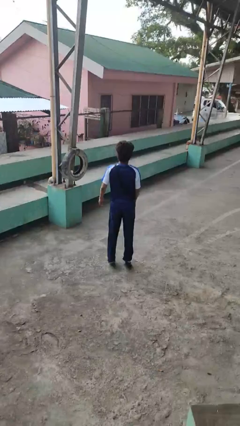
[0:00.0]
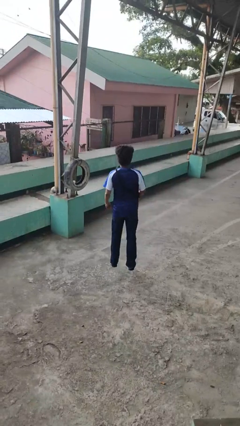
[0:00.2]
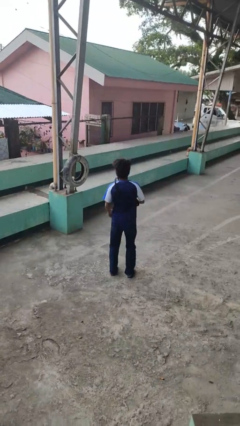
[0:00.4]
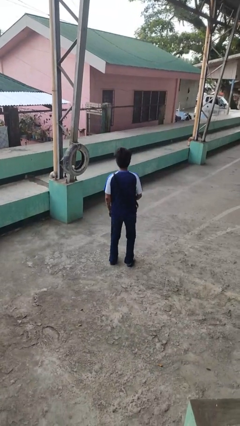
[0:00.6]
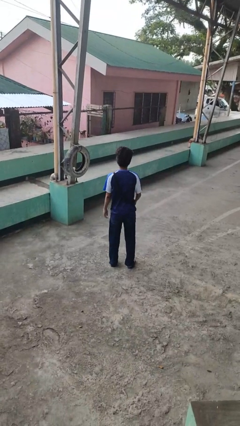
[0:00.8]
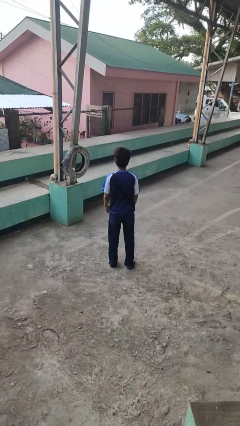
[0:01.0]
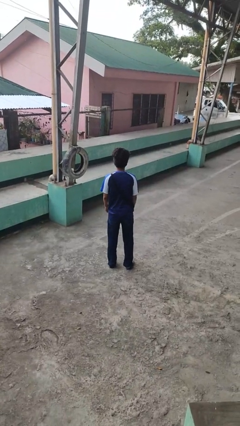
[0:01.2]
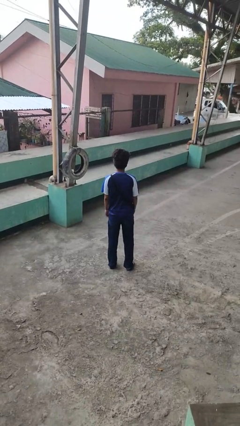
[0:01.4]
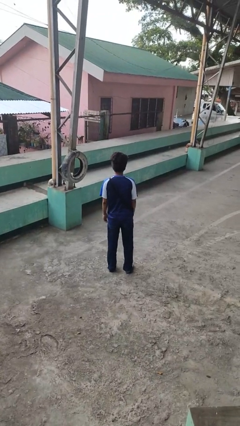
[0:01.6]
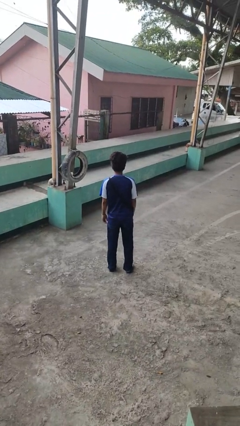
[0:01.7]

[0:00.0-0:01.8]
person jumps

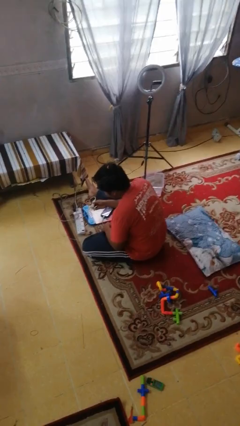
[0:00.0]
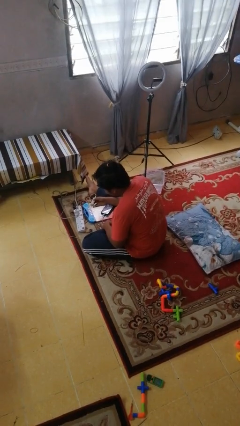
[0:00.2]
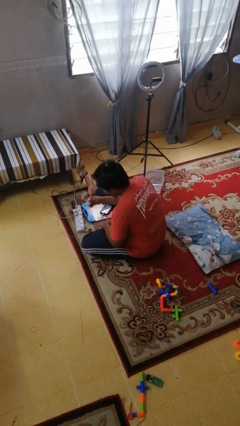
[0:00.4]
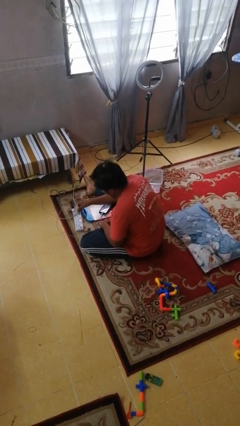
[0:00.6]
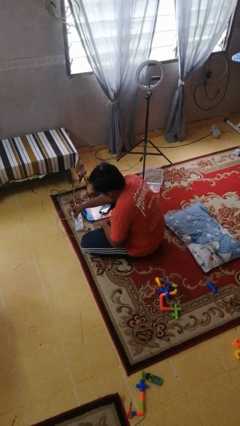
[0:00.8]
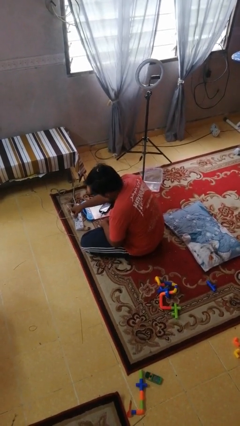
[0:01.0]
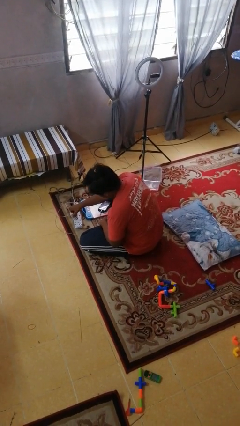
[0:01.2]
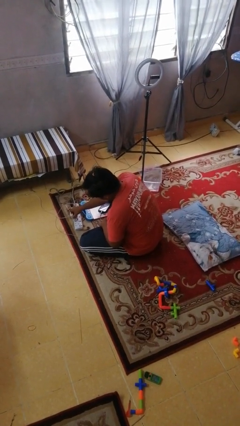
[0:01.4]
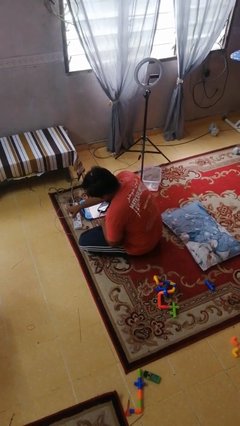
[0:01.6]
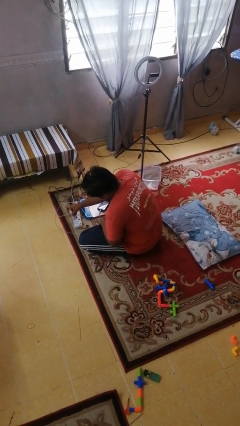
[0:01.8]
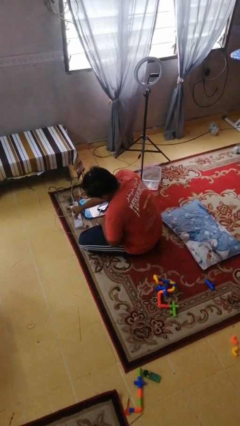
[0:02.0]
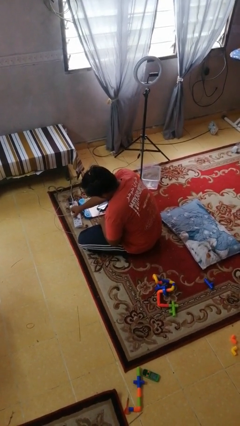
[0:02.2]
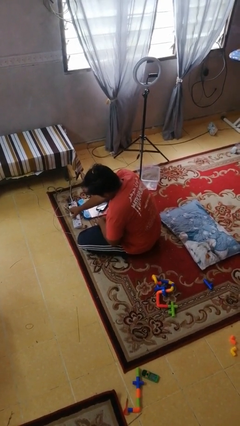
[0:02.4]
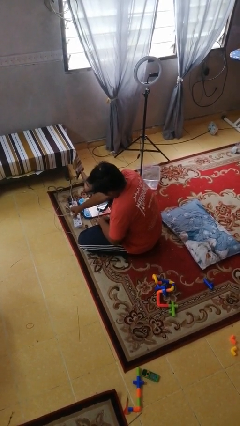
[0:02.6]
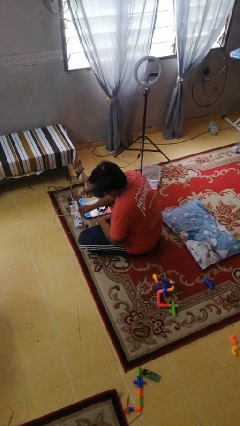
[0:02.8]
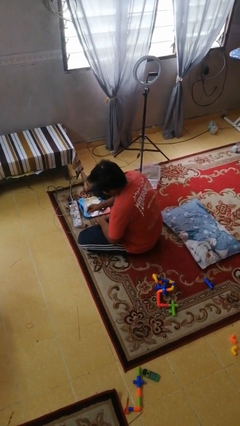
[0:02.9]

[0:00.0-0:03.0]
person plugs into electrical socket

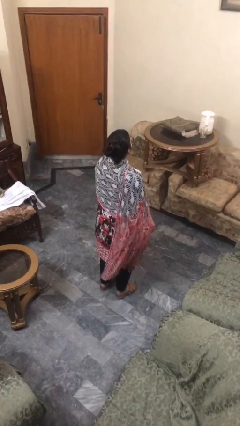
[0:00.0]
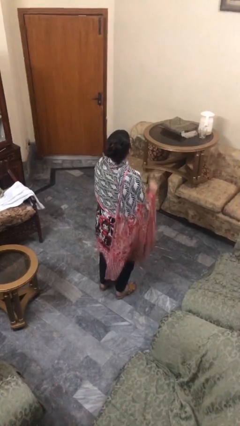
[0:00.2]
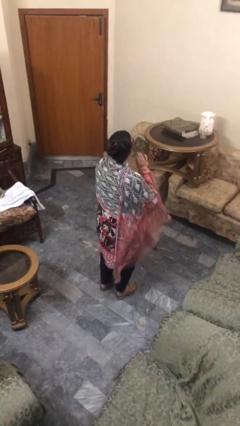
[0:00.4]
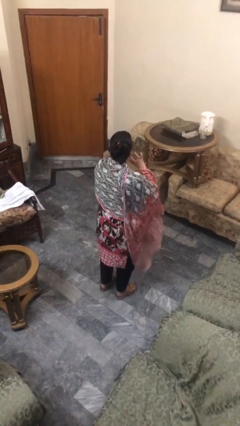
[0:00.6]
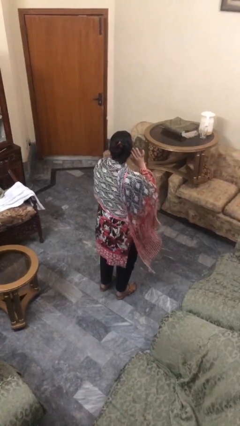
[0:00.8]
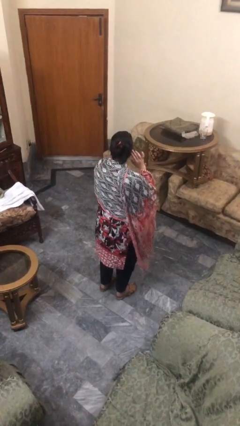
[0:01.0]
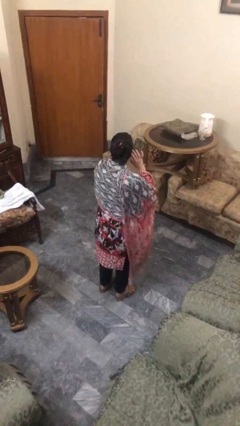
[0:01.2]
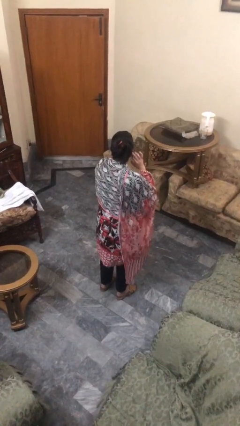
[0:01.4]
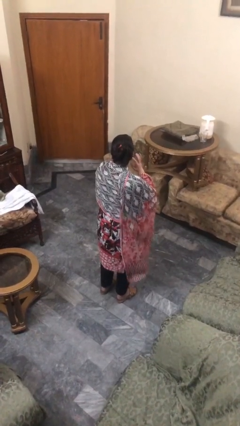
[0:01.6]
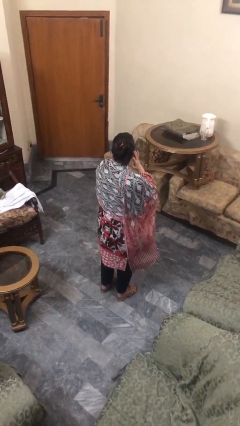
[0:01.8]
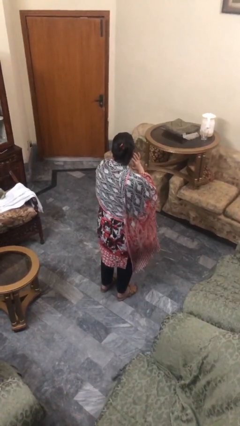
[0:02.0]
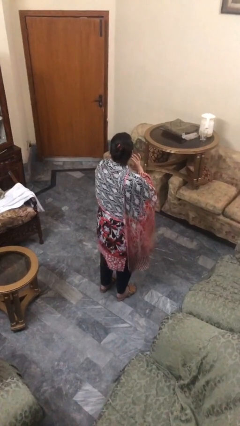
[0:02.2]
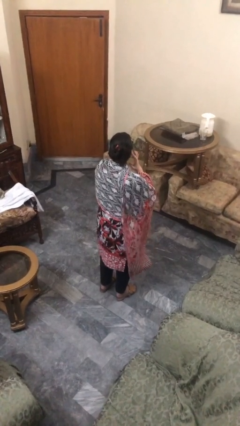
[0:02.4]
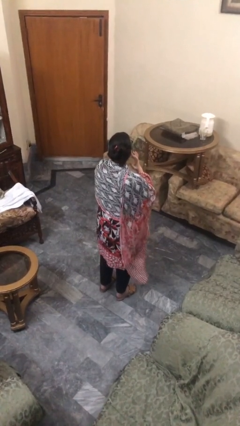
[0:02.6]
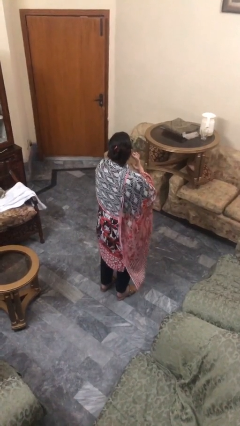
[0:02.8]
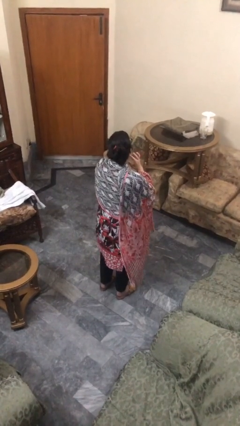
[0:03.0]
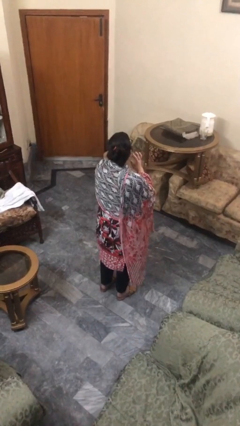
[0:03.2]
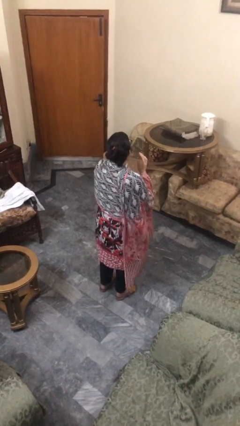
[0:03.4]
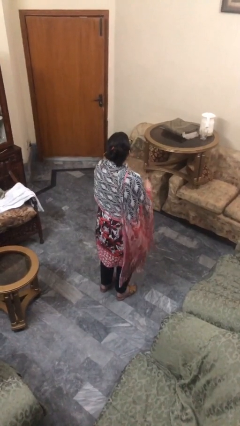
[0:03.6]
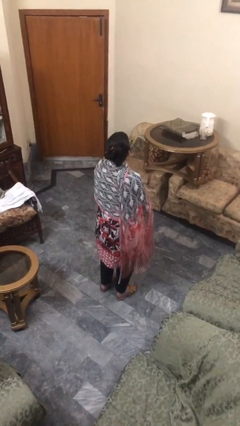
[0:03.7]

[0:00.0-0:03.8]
person touches earlobe

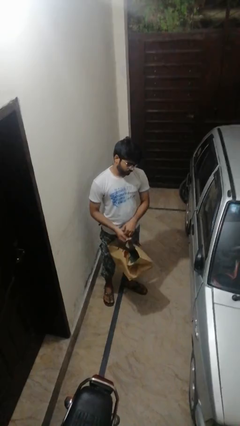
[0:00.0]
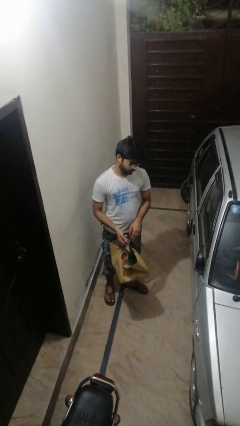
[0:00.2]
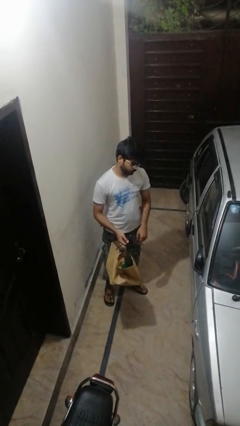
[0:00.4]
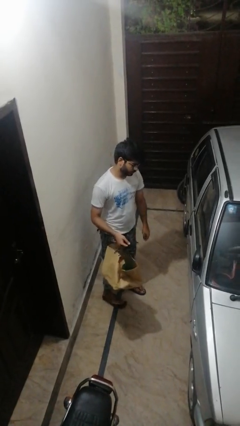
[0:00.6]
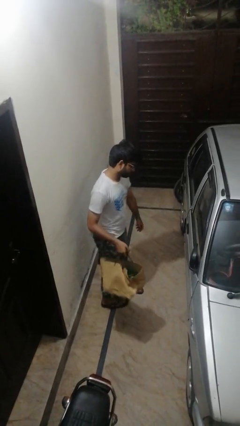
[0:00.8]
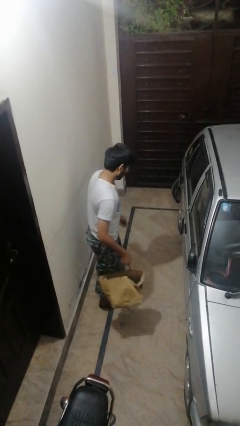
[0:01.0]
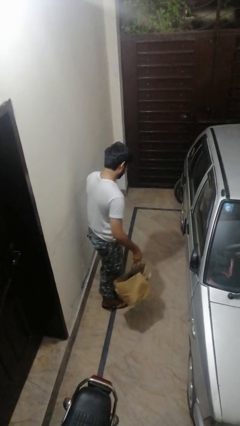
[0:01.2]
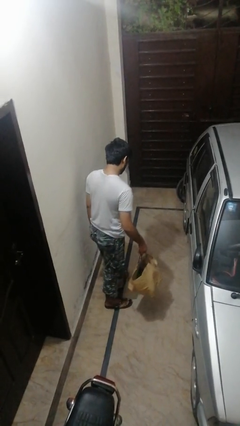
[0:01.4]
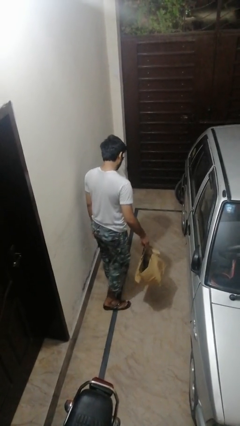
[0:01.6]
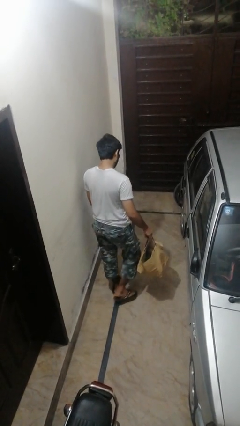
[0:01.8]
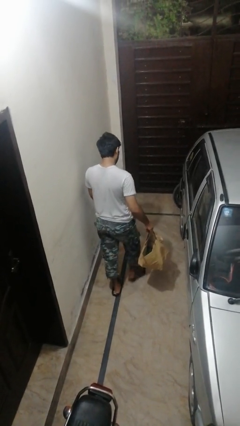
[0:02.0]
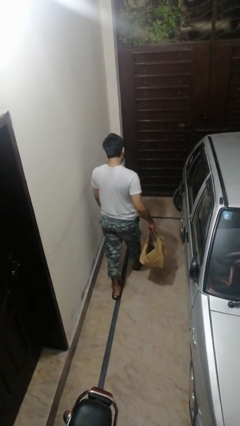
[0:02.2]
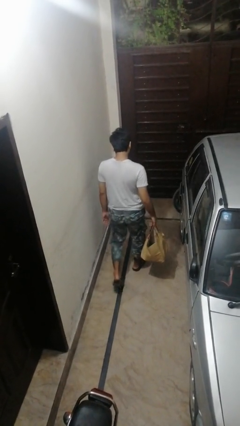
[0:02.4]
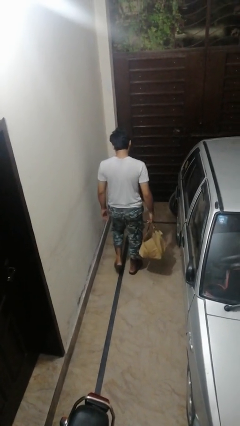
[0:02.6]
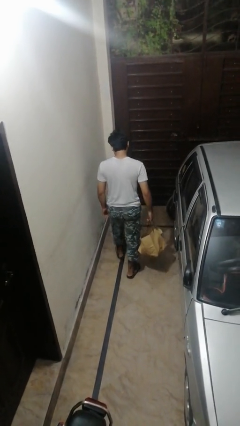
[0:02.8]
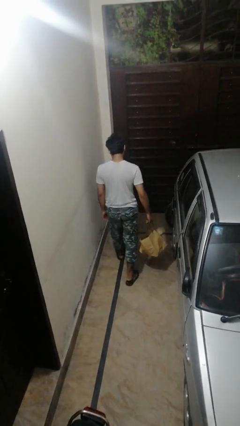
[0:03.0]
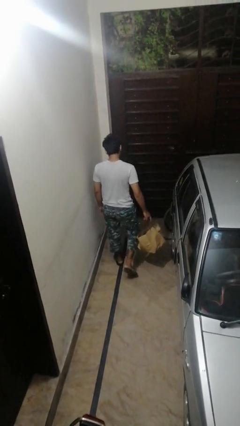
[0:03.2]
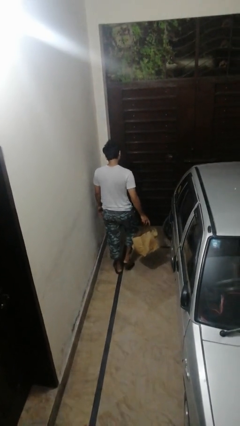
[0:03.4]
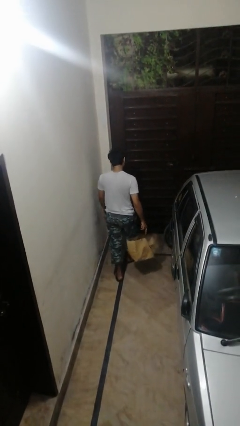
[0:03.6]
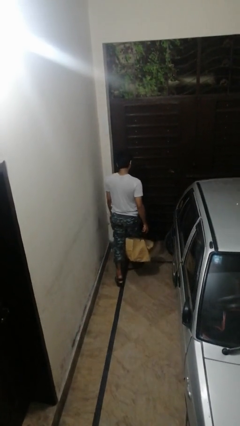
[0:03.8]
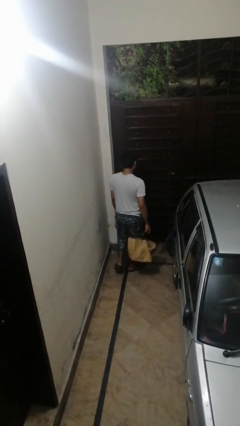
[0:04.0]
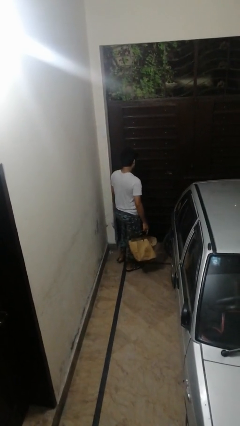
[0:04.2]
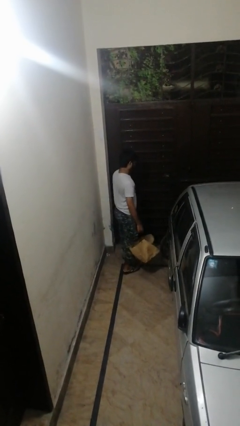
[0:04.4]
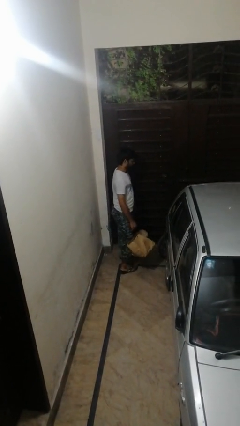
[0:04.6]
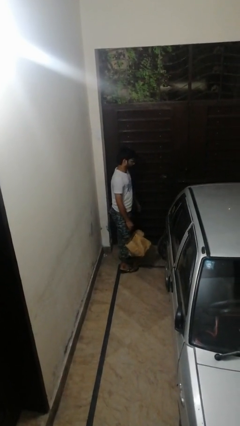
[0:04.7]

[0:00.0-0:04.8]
person carries groceries

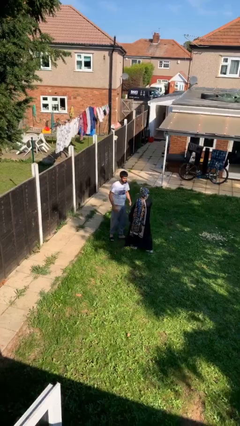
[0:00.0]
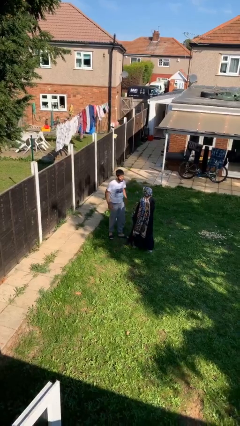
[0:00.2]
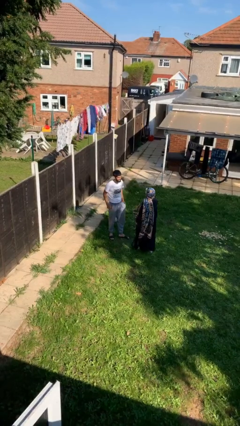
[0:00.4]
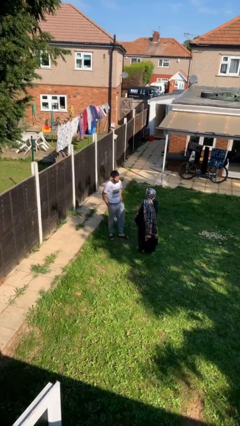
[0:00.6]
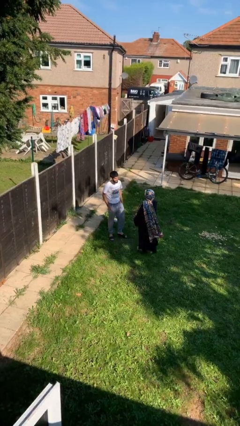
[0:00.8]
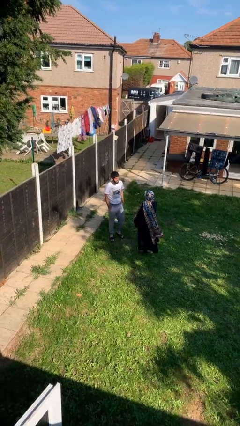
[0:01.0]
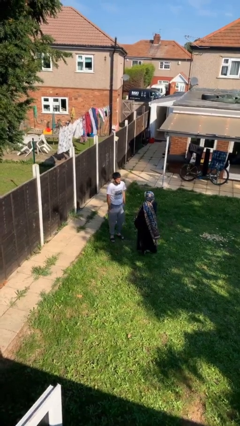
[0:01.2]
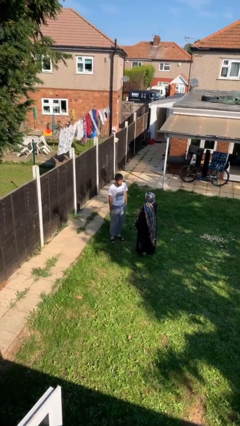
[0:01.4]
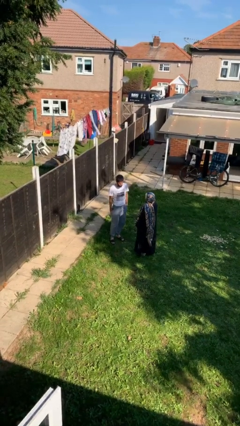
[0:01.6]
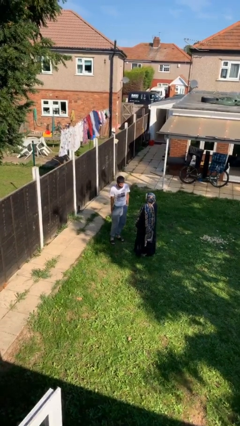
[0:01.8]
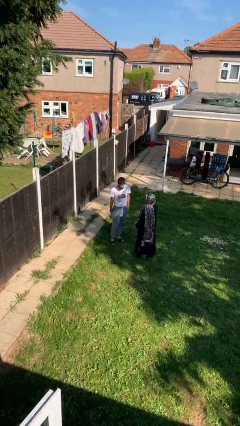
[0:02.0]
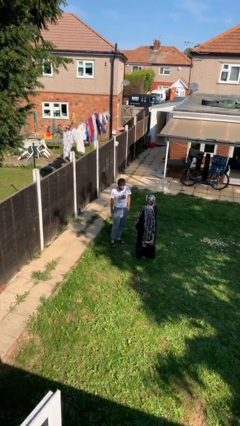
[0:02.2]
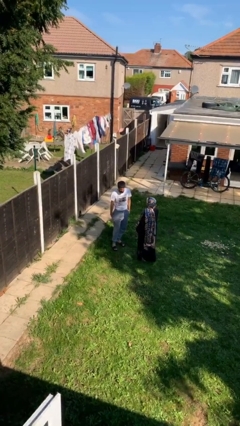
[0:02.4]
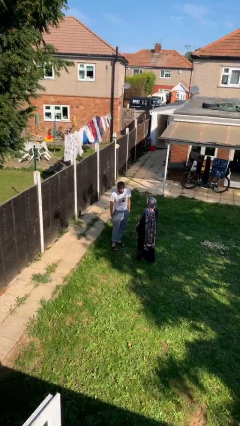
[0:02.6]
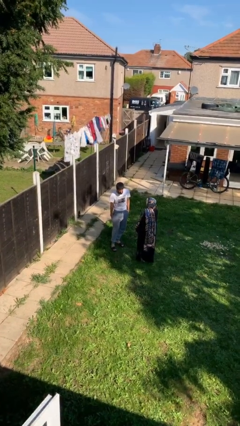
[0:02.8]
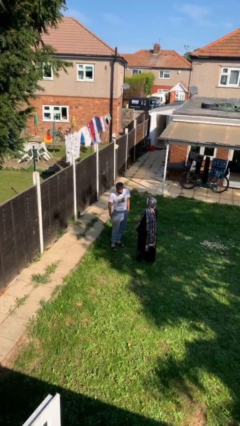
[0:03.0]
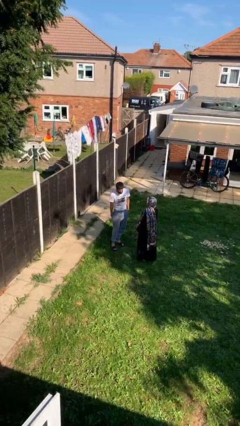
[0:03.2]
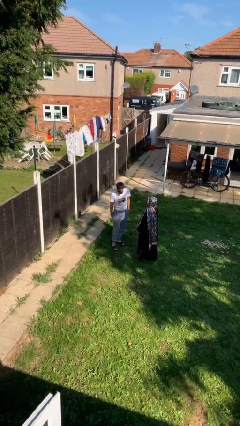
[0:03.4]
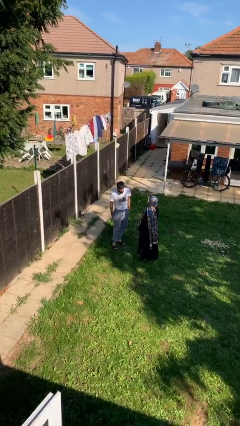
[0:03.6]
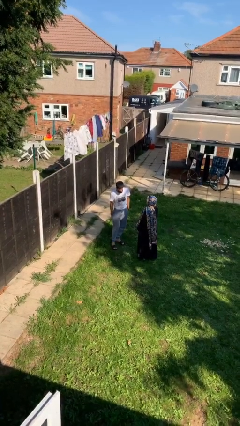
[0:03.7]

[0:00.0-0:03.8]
person talks to person

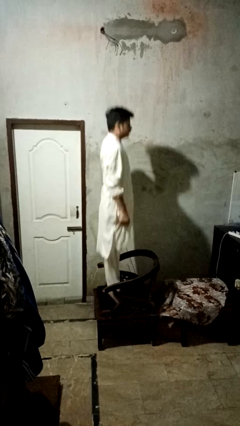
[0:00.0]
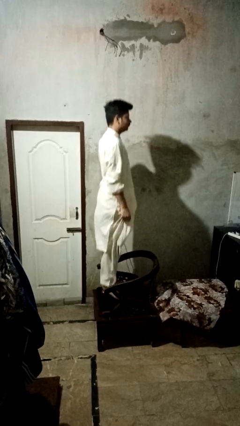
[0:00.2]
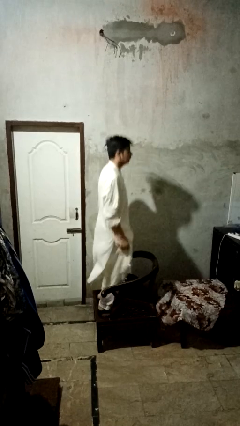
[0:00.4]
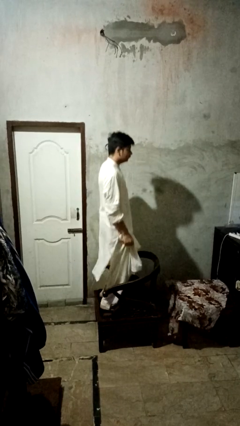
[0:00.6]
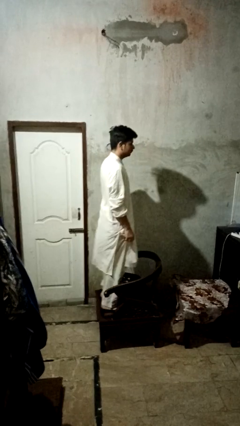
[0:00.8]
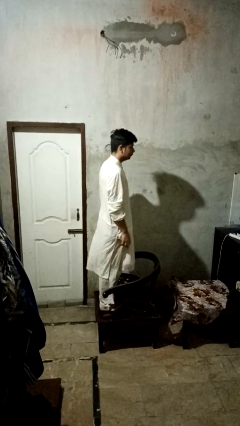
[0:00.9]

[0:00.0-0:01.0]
person jumps on couch
